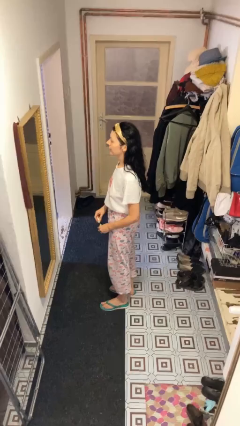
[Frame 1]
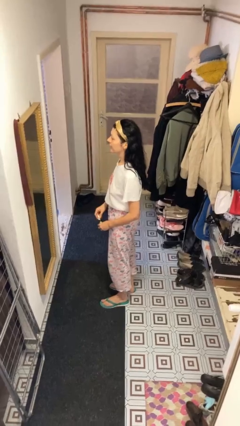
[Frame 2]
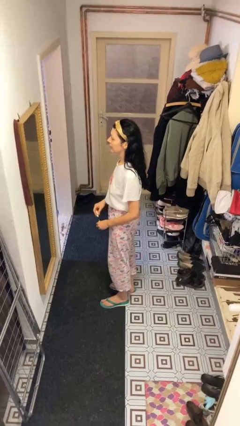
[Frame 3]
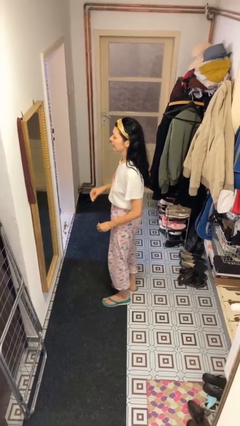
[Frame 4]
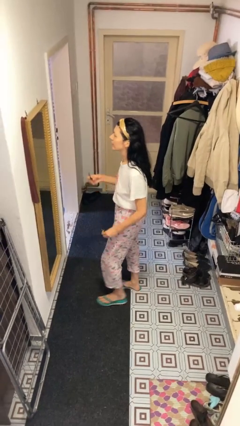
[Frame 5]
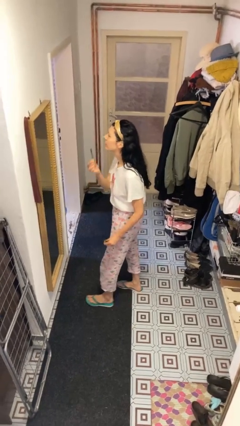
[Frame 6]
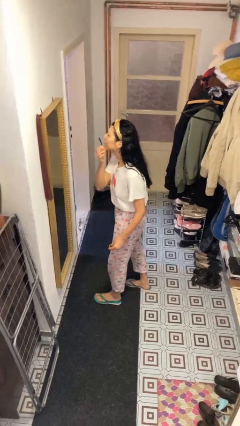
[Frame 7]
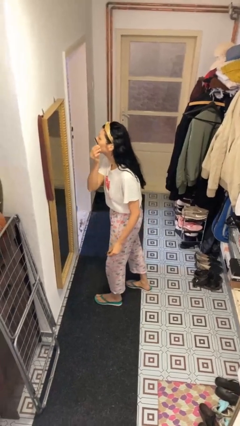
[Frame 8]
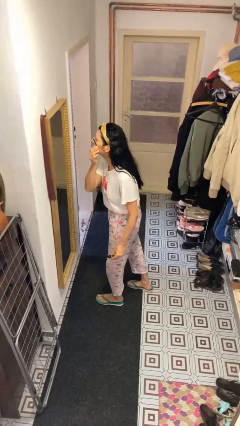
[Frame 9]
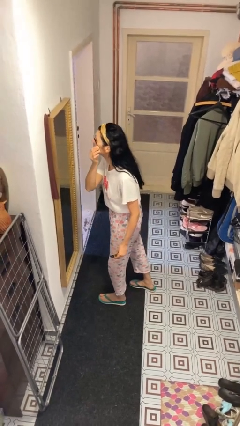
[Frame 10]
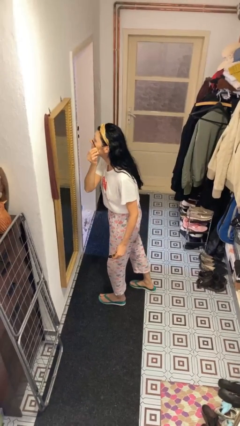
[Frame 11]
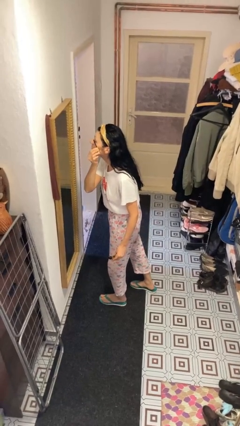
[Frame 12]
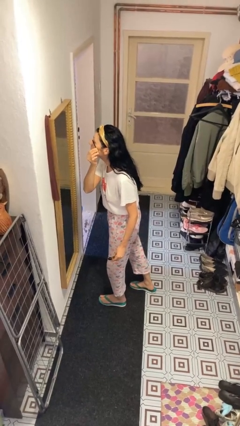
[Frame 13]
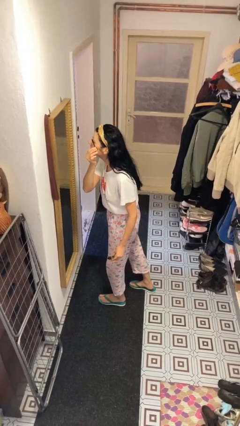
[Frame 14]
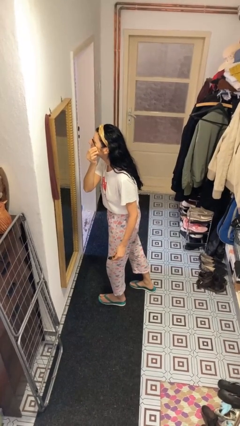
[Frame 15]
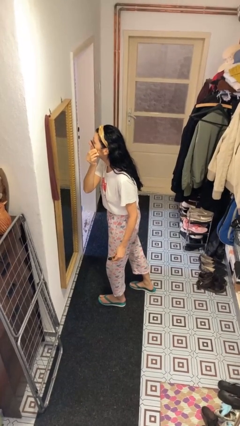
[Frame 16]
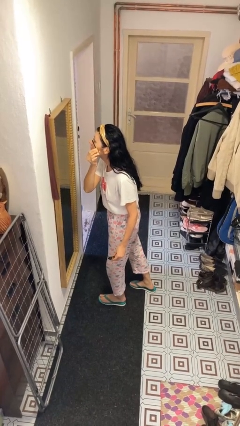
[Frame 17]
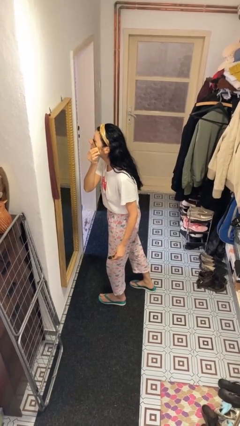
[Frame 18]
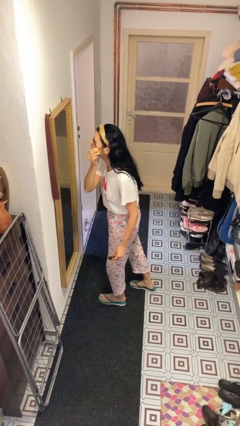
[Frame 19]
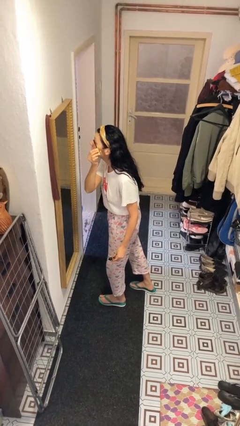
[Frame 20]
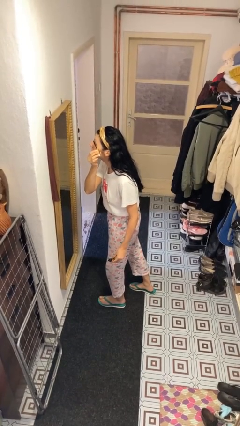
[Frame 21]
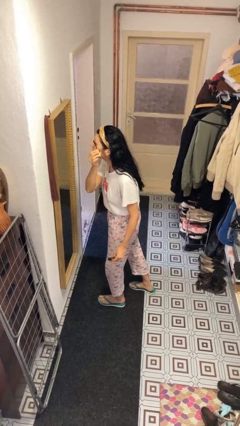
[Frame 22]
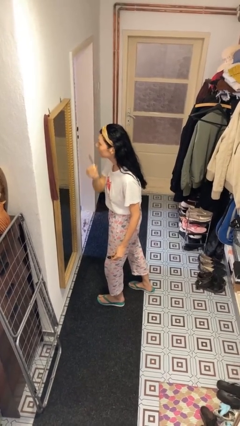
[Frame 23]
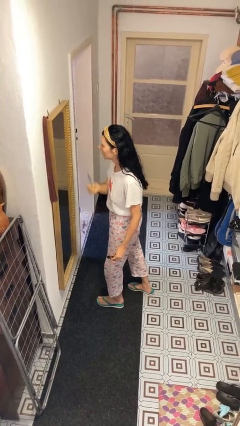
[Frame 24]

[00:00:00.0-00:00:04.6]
person applies eye makeup

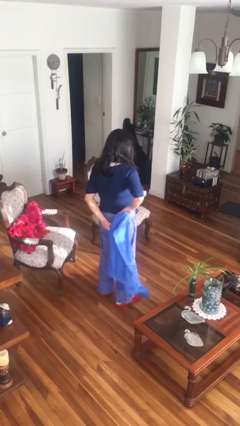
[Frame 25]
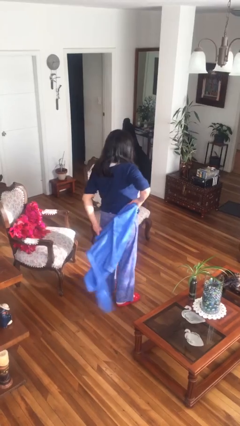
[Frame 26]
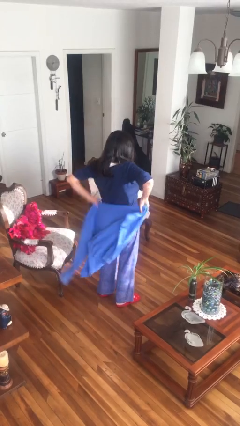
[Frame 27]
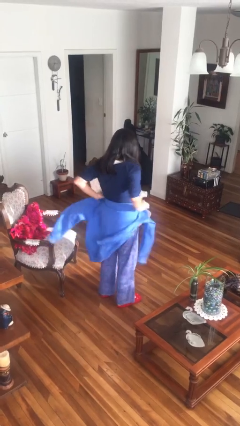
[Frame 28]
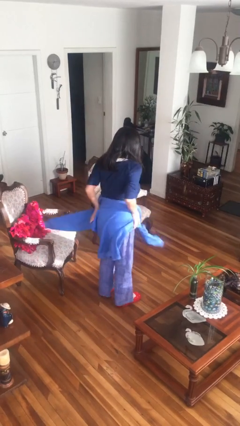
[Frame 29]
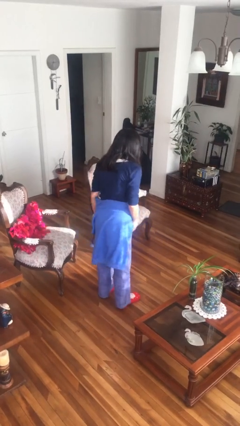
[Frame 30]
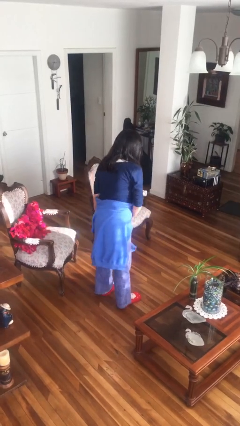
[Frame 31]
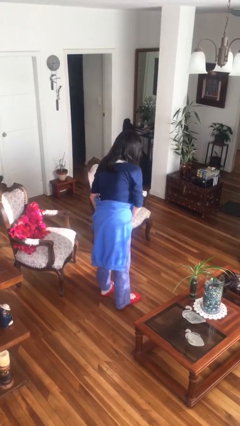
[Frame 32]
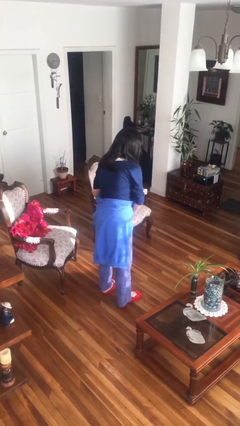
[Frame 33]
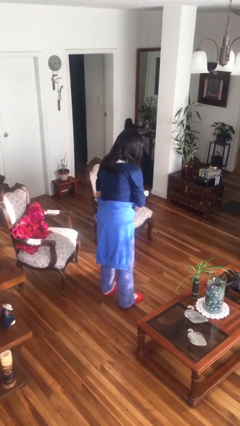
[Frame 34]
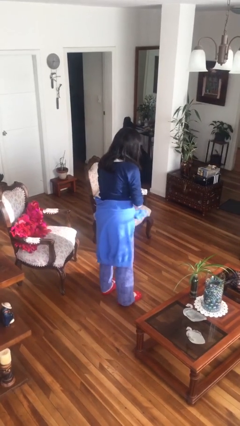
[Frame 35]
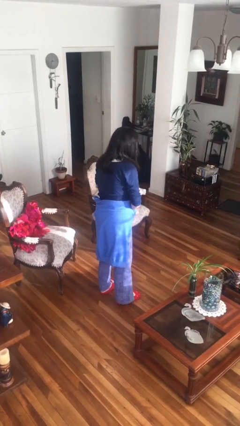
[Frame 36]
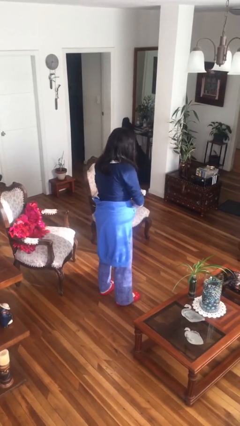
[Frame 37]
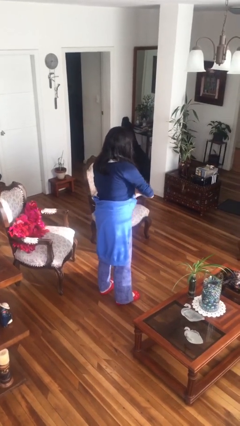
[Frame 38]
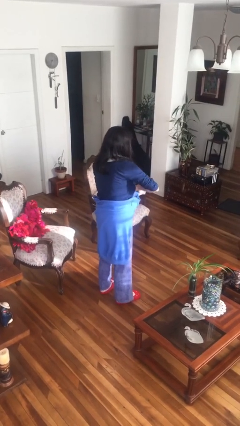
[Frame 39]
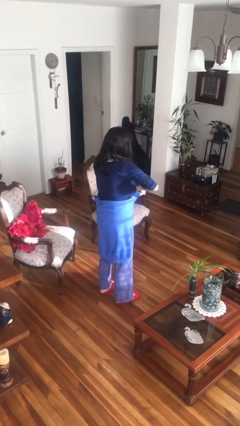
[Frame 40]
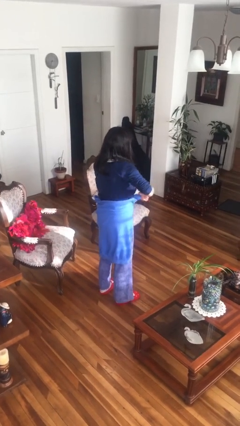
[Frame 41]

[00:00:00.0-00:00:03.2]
person ties jacket around waist

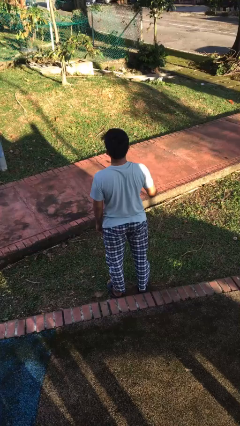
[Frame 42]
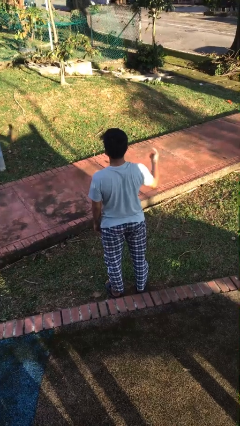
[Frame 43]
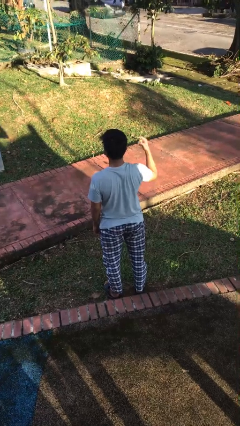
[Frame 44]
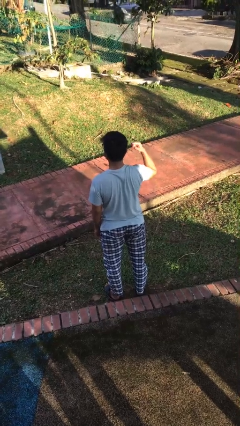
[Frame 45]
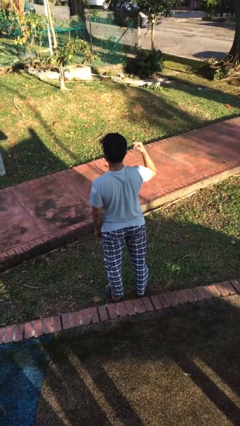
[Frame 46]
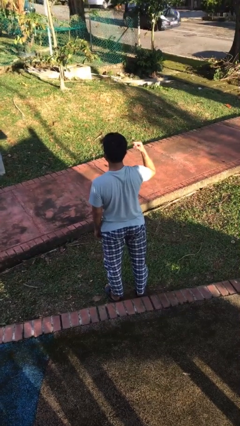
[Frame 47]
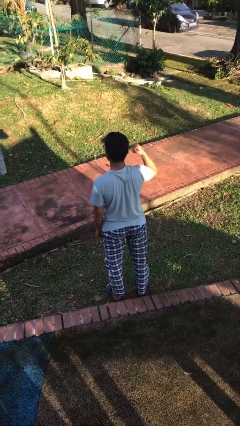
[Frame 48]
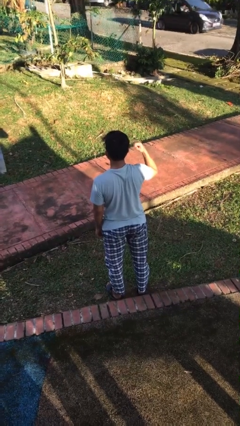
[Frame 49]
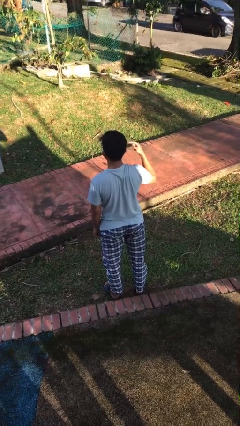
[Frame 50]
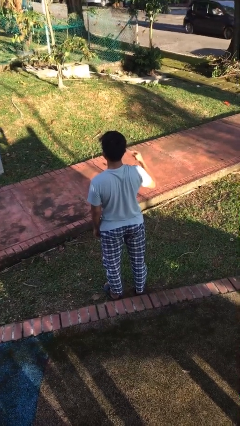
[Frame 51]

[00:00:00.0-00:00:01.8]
person gestures listen closely

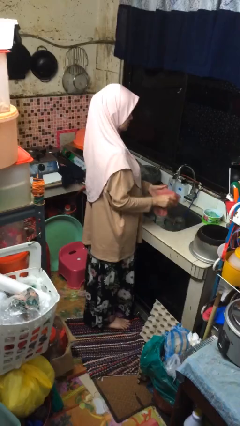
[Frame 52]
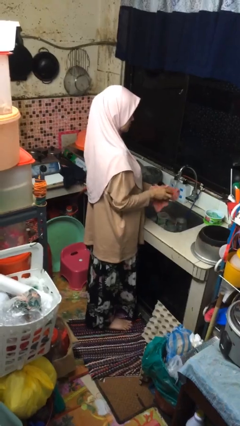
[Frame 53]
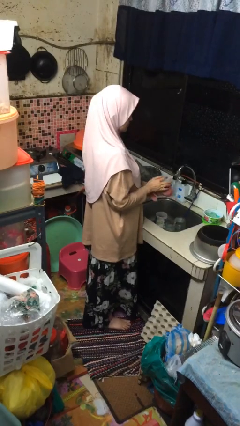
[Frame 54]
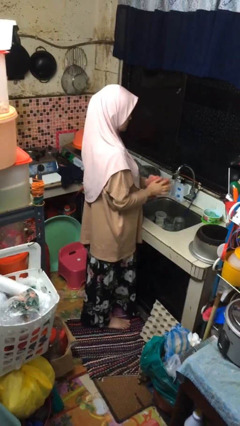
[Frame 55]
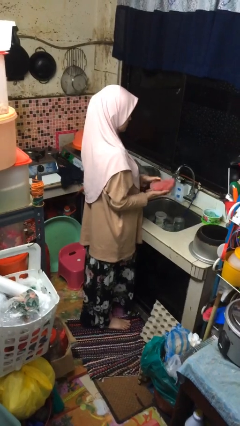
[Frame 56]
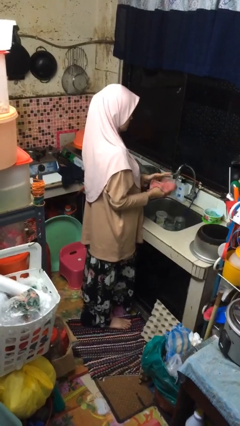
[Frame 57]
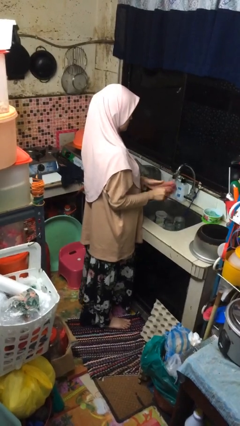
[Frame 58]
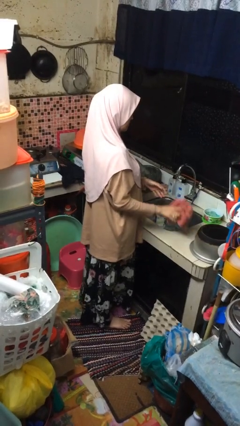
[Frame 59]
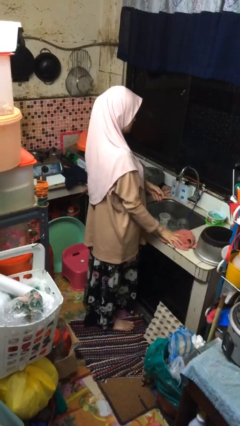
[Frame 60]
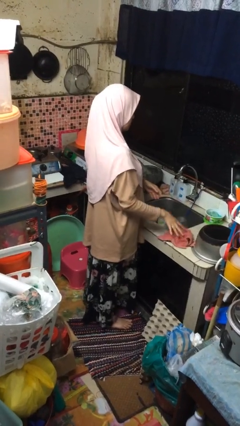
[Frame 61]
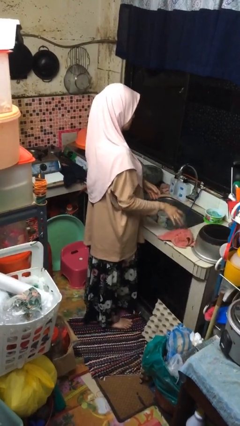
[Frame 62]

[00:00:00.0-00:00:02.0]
person dries hands with towel

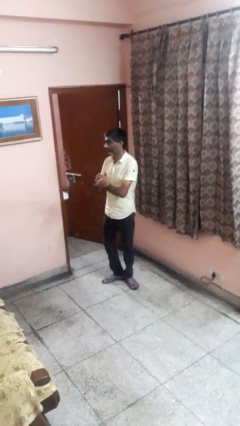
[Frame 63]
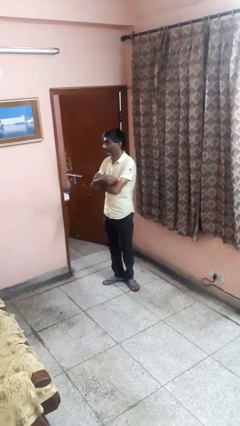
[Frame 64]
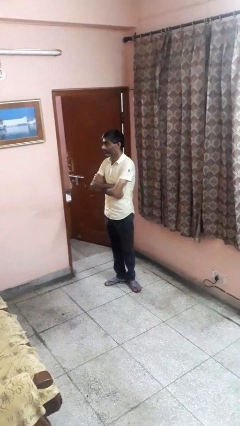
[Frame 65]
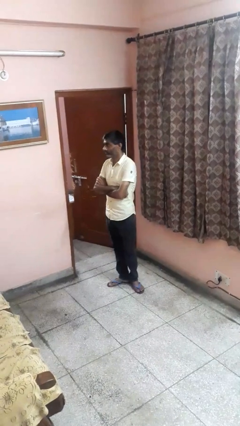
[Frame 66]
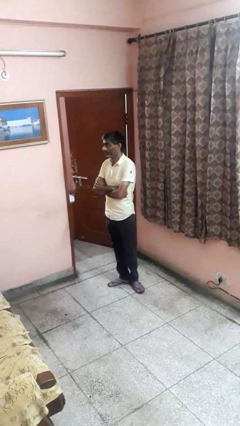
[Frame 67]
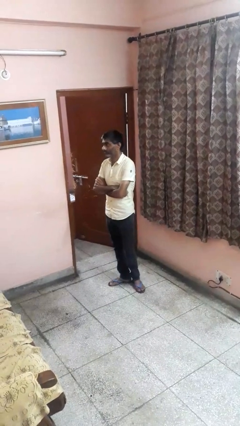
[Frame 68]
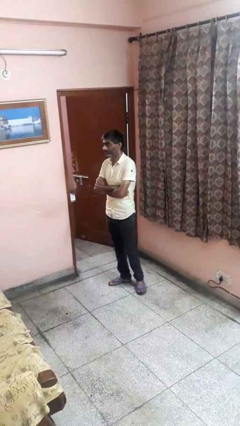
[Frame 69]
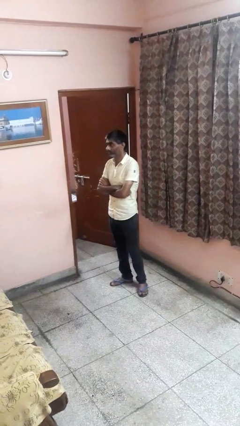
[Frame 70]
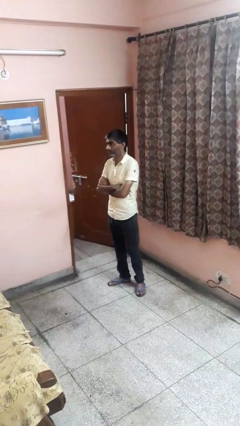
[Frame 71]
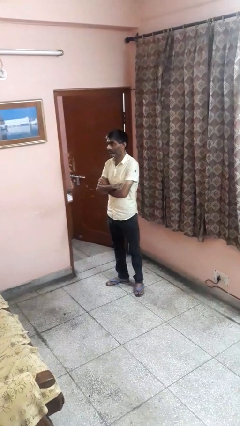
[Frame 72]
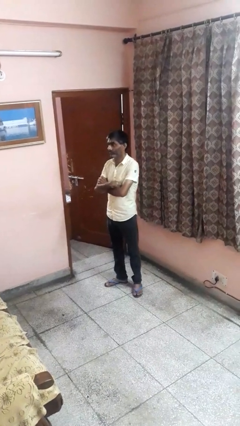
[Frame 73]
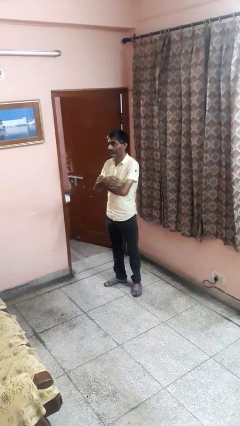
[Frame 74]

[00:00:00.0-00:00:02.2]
person crosses arms

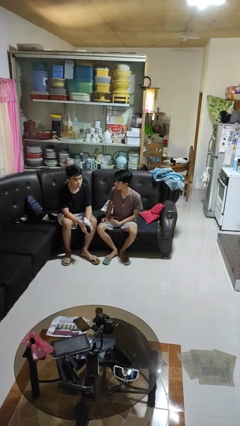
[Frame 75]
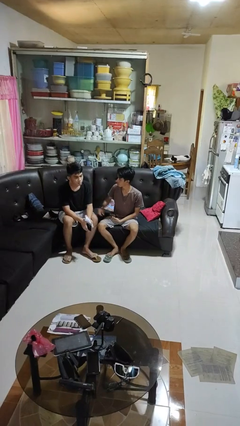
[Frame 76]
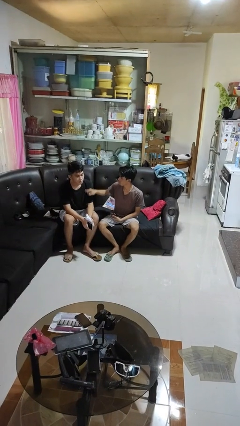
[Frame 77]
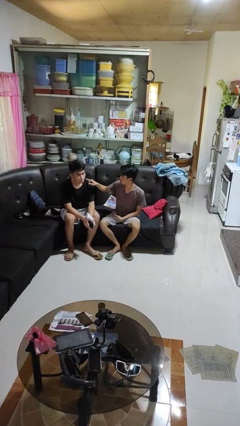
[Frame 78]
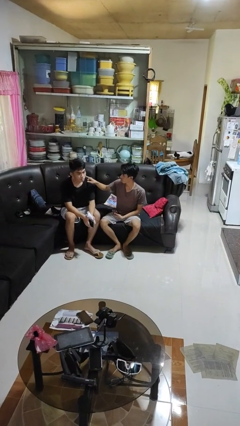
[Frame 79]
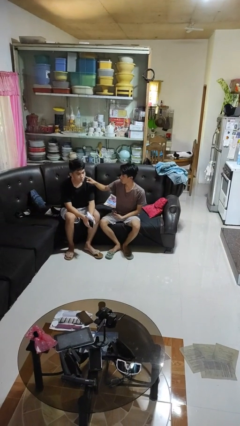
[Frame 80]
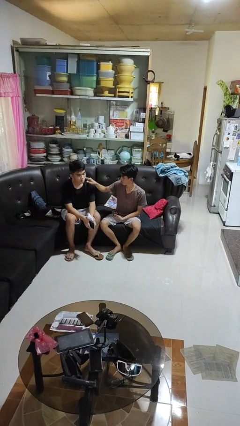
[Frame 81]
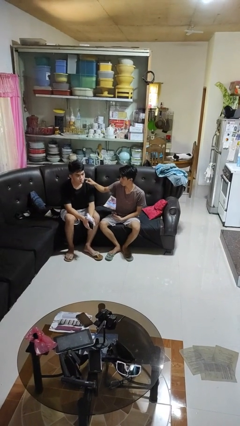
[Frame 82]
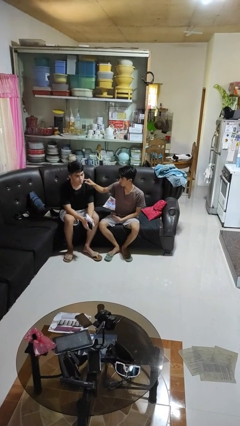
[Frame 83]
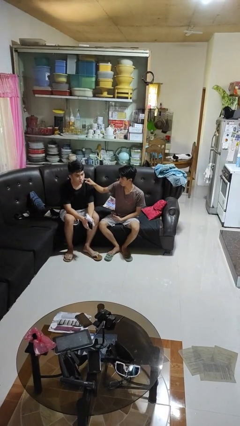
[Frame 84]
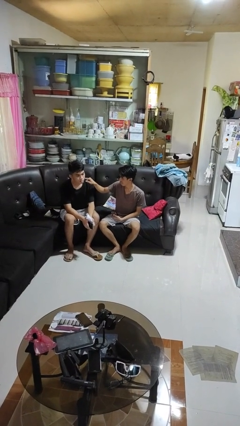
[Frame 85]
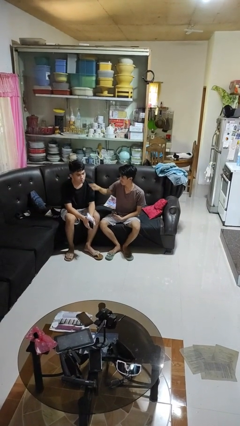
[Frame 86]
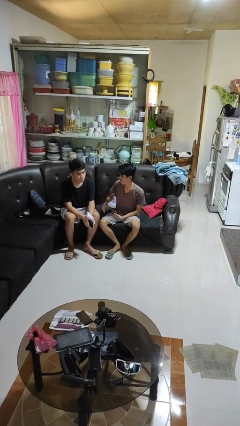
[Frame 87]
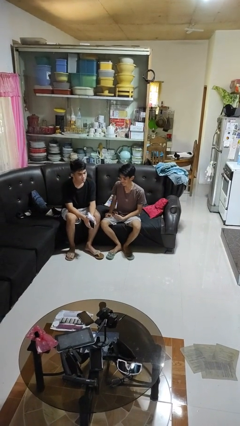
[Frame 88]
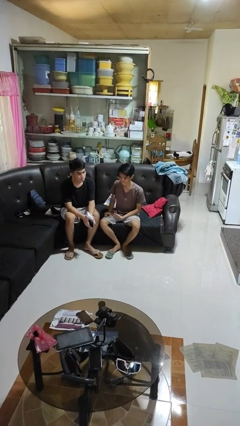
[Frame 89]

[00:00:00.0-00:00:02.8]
person touches face of person

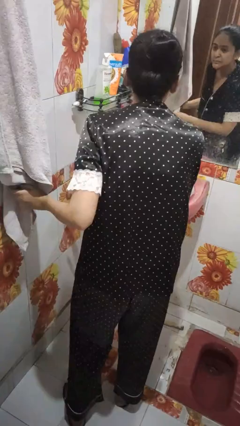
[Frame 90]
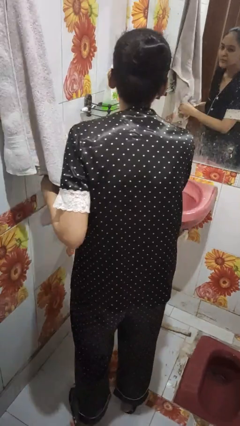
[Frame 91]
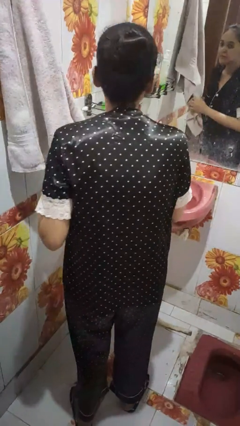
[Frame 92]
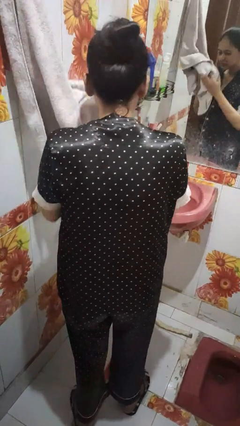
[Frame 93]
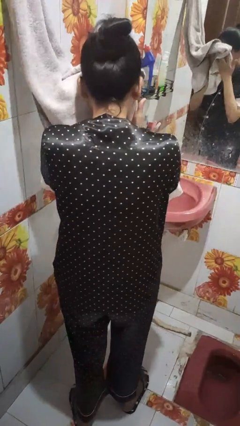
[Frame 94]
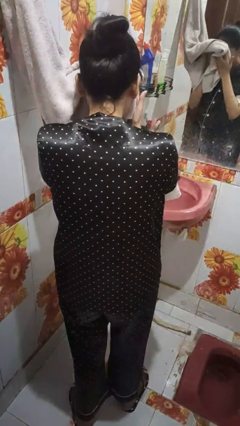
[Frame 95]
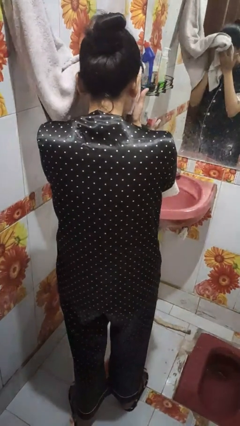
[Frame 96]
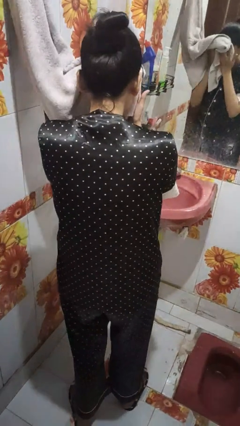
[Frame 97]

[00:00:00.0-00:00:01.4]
person dries face with towel
